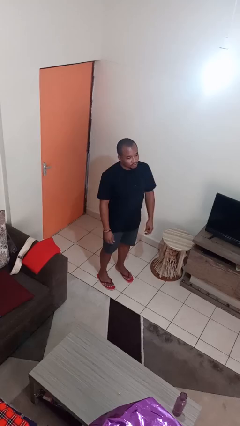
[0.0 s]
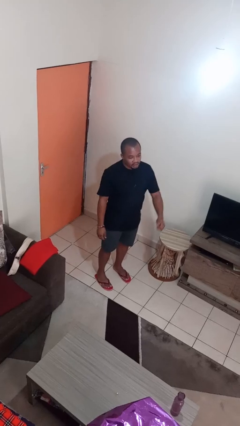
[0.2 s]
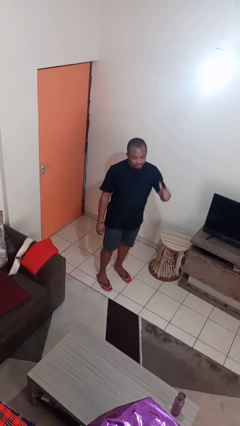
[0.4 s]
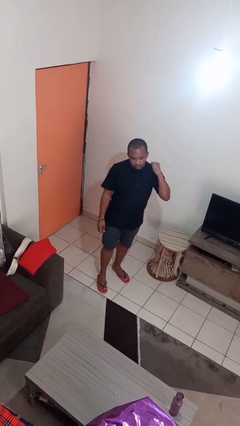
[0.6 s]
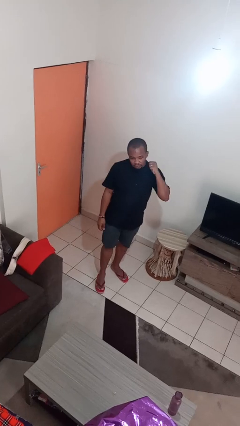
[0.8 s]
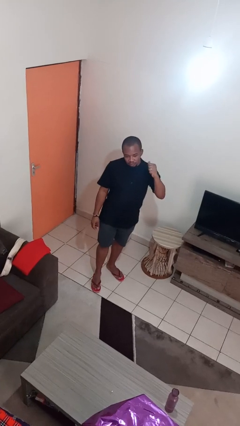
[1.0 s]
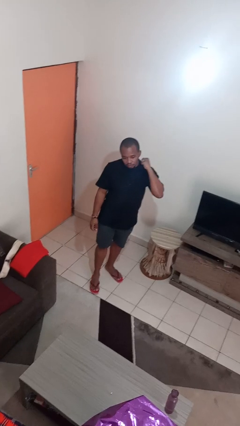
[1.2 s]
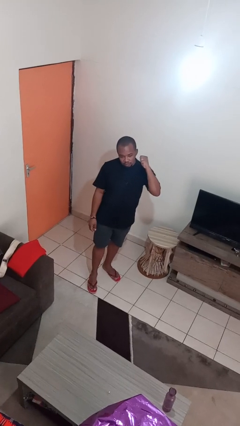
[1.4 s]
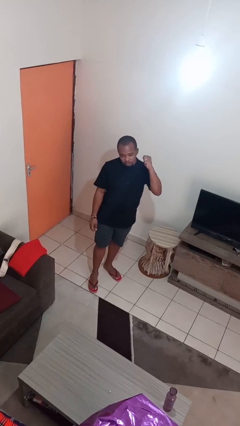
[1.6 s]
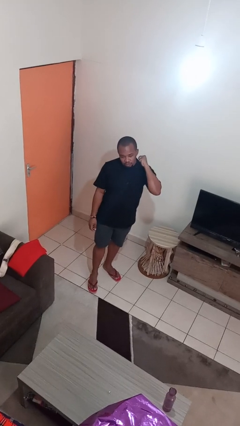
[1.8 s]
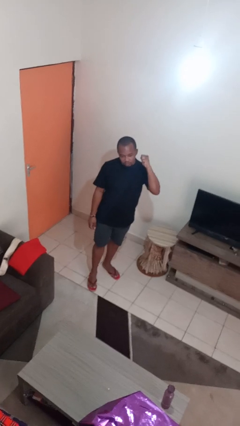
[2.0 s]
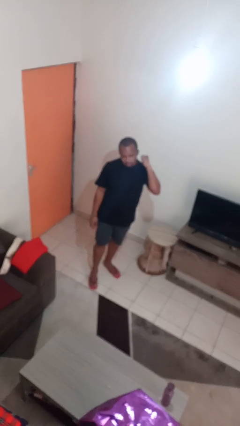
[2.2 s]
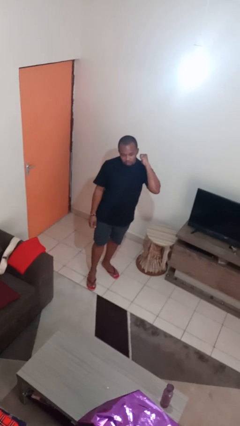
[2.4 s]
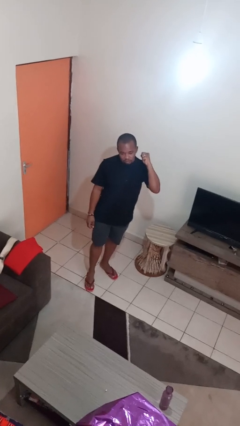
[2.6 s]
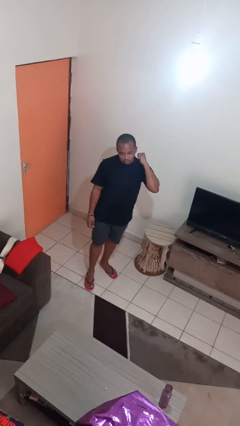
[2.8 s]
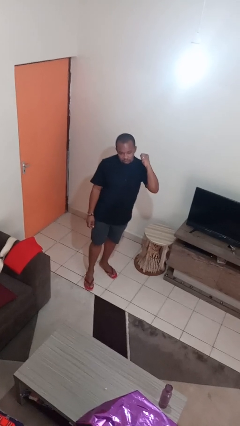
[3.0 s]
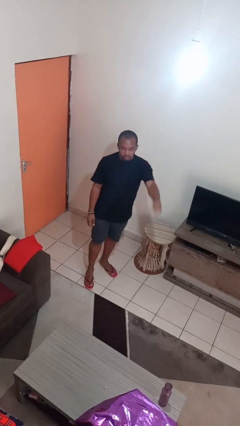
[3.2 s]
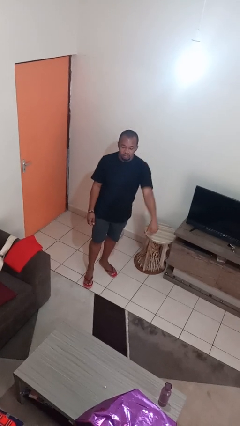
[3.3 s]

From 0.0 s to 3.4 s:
person gestures behind me

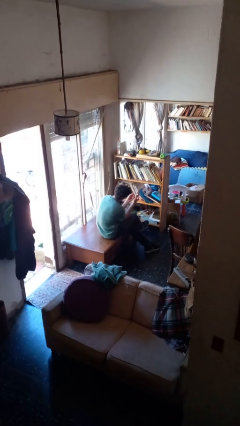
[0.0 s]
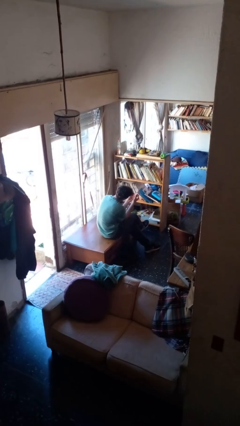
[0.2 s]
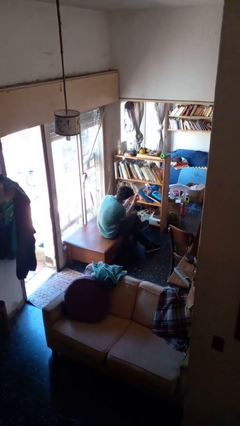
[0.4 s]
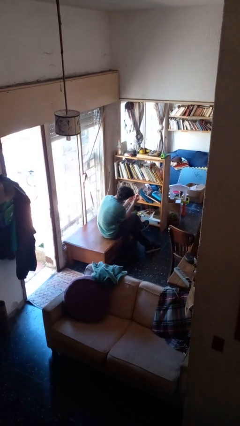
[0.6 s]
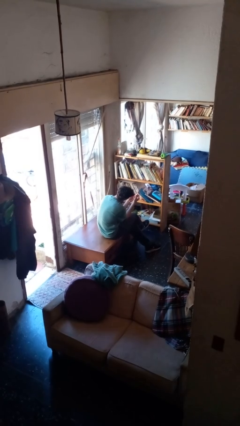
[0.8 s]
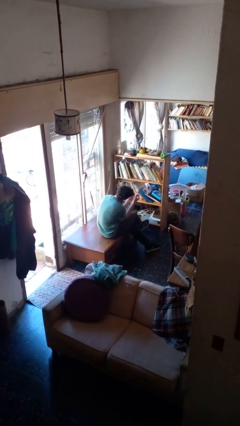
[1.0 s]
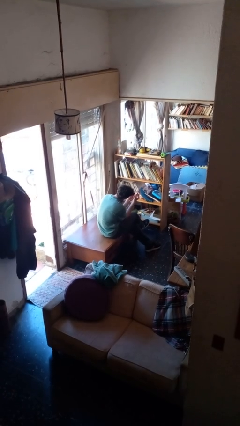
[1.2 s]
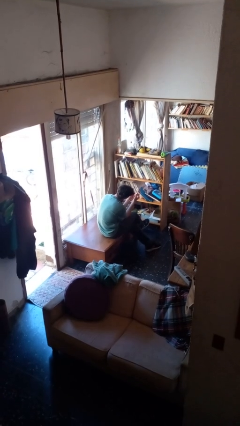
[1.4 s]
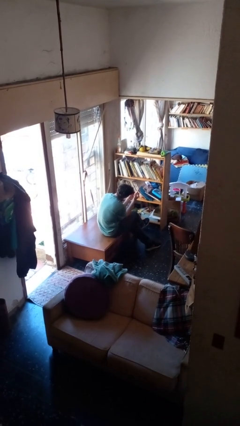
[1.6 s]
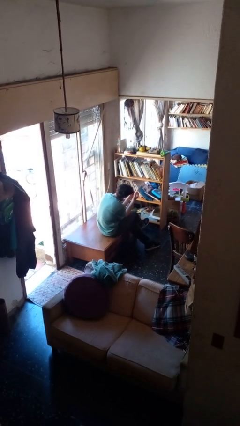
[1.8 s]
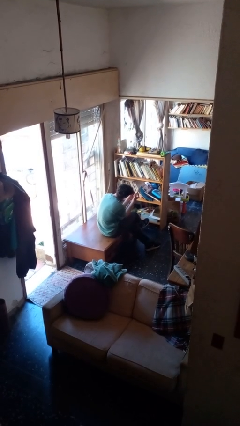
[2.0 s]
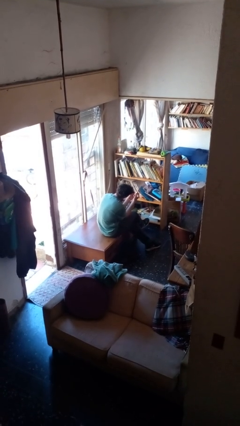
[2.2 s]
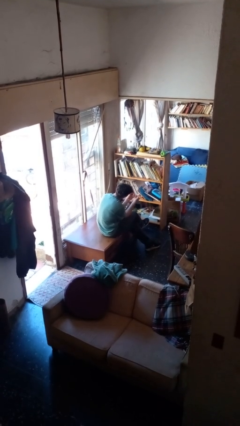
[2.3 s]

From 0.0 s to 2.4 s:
person paints fingernails

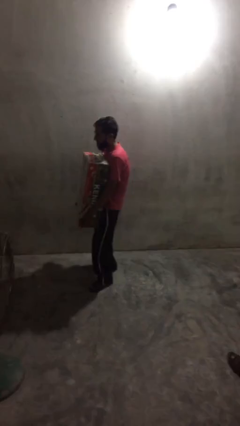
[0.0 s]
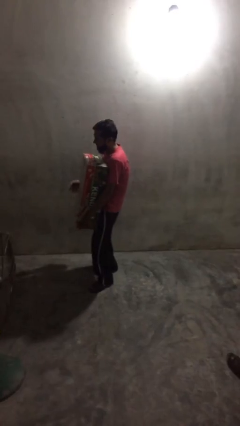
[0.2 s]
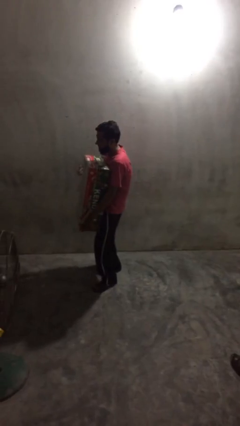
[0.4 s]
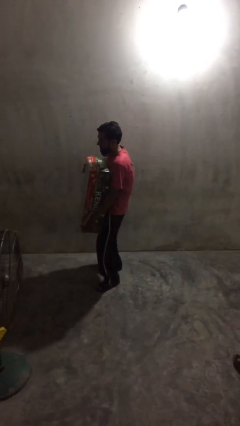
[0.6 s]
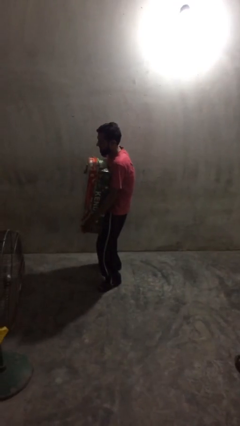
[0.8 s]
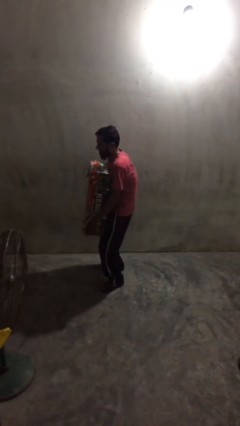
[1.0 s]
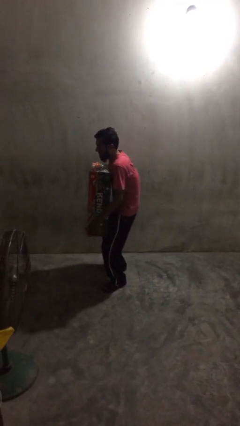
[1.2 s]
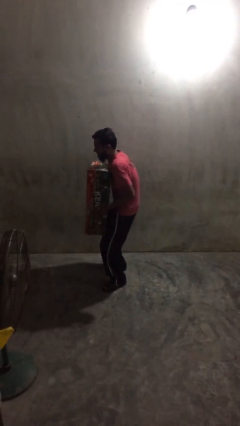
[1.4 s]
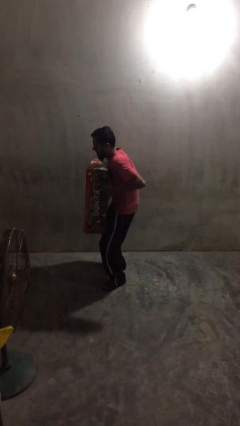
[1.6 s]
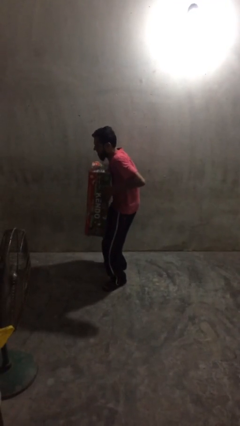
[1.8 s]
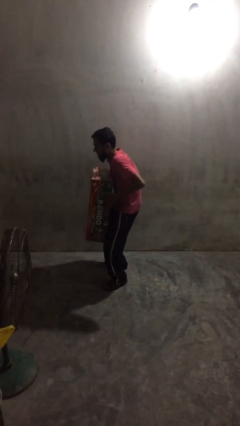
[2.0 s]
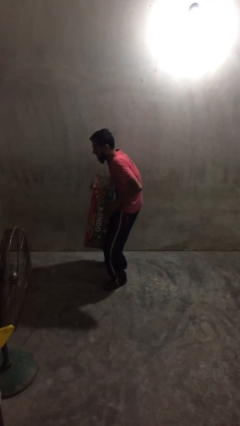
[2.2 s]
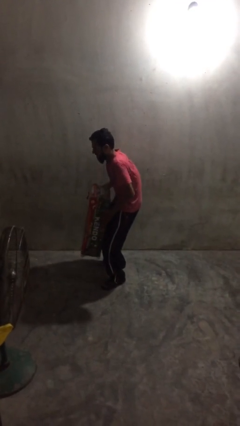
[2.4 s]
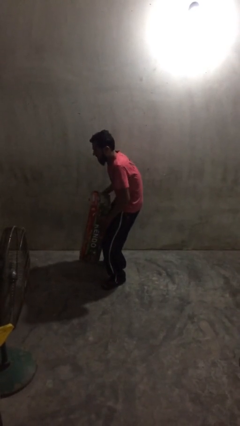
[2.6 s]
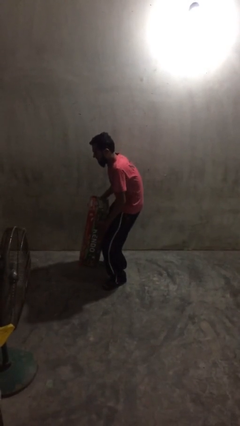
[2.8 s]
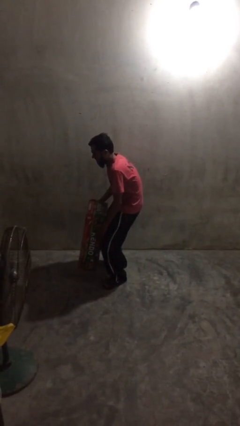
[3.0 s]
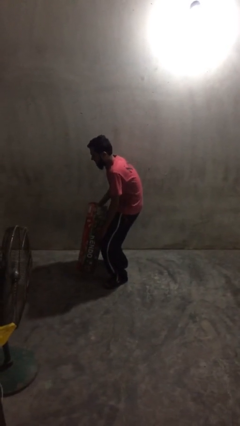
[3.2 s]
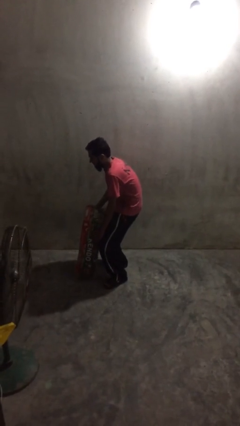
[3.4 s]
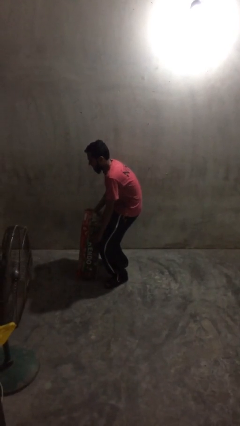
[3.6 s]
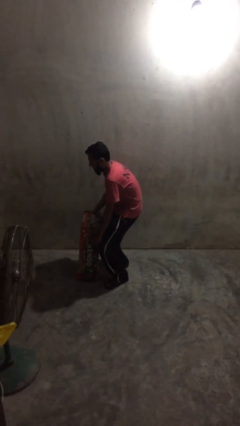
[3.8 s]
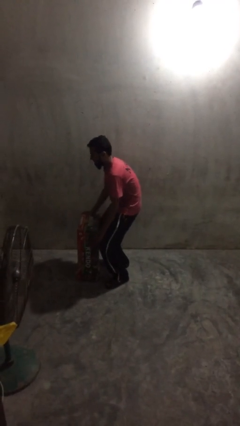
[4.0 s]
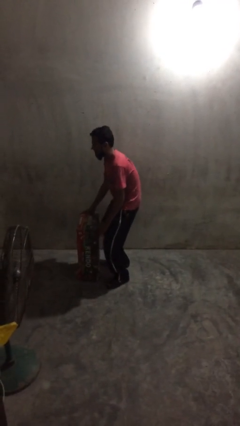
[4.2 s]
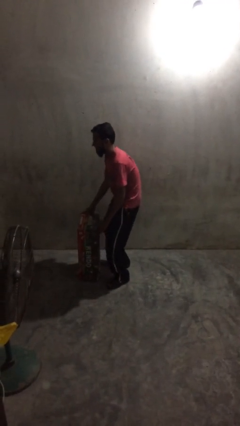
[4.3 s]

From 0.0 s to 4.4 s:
person puts down object on floor

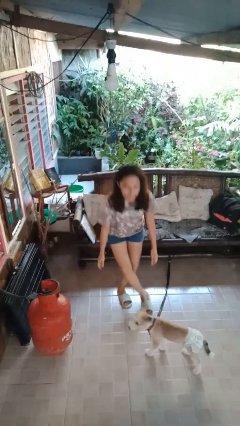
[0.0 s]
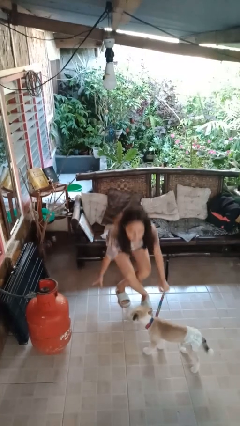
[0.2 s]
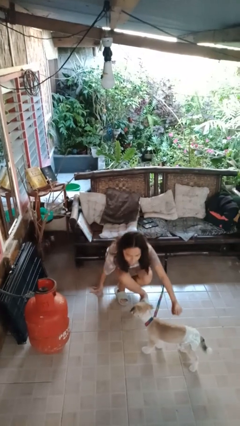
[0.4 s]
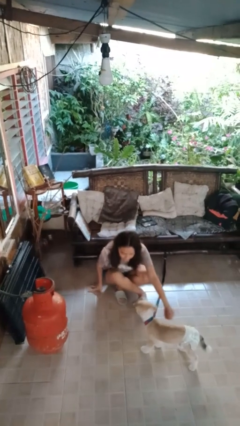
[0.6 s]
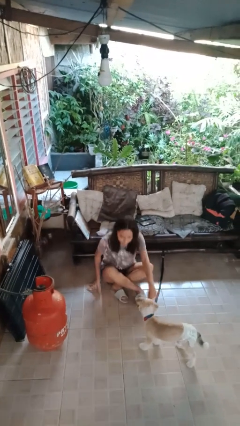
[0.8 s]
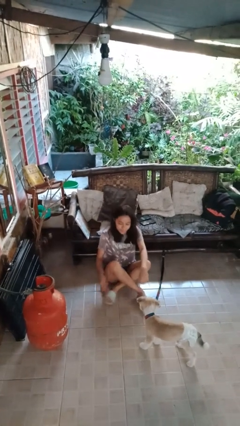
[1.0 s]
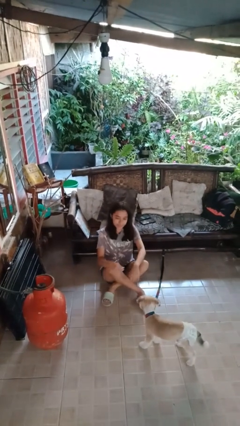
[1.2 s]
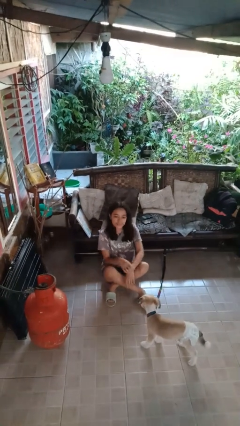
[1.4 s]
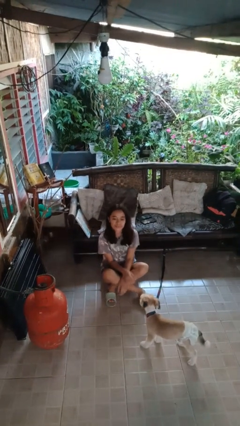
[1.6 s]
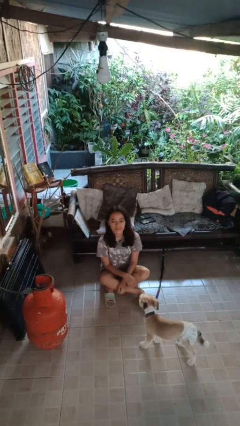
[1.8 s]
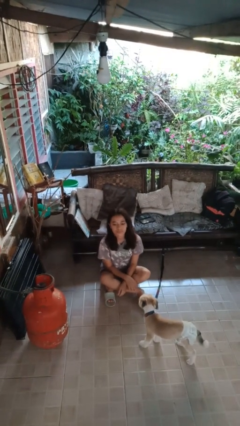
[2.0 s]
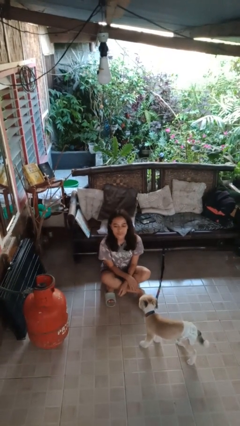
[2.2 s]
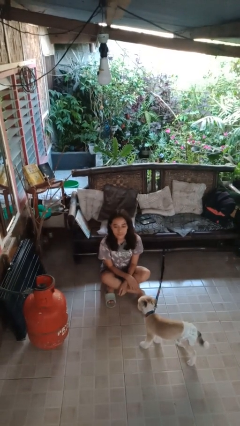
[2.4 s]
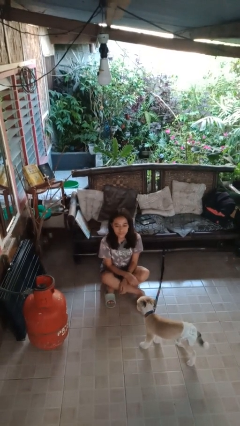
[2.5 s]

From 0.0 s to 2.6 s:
person sits crisscross

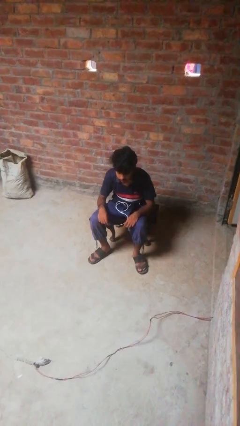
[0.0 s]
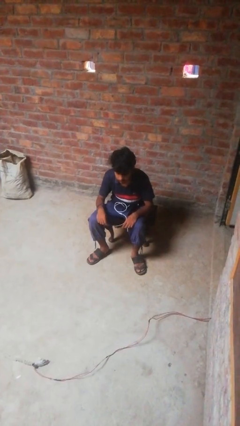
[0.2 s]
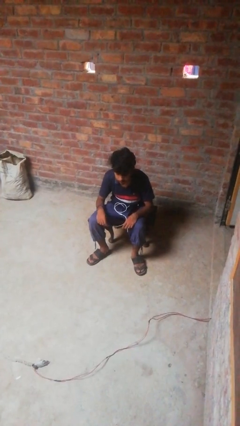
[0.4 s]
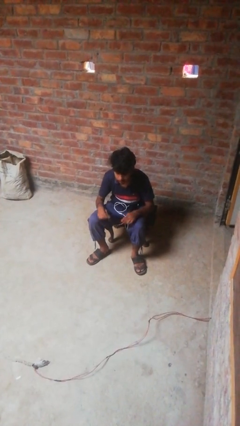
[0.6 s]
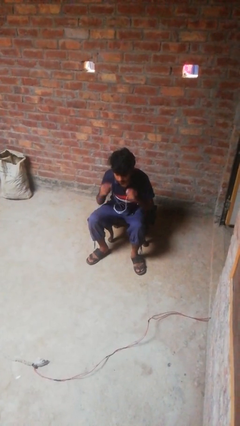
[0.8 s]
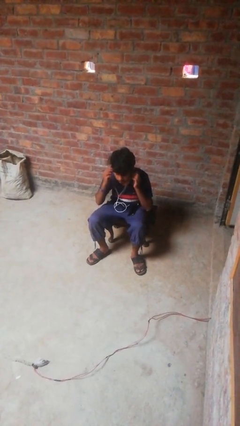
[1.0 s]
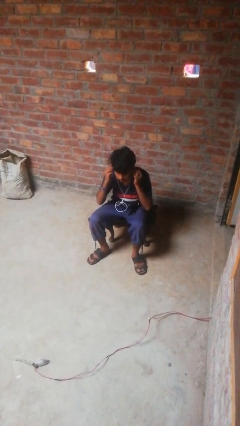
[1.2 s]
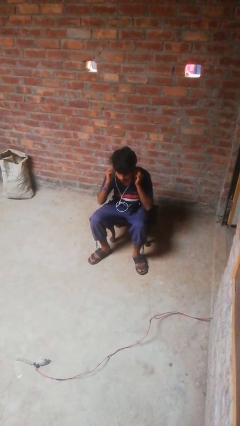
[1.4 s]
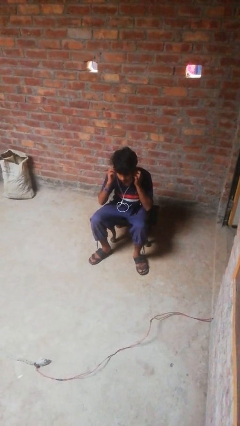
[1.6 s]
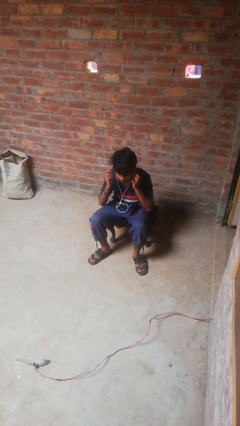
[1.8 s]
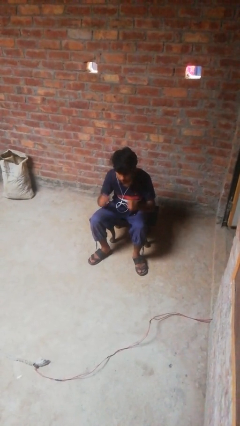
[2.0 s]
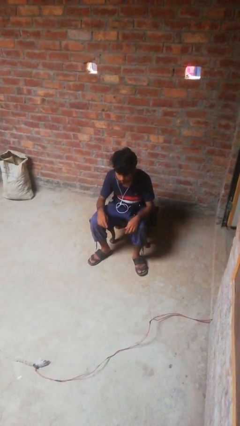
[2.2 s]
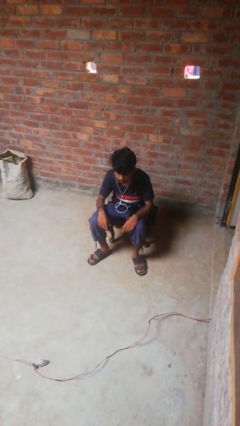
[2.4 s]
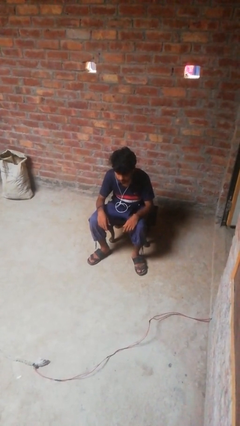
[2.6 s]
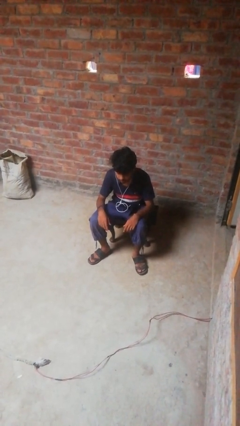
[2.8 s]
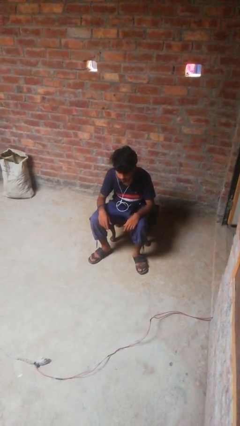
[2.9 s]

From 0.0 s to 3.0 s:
person puts on headphones

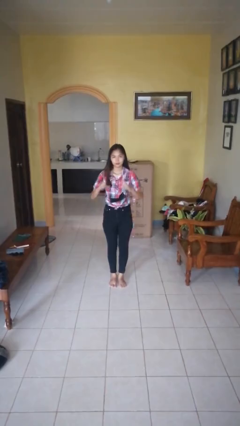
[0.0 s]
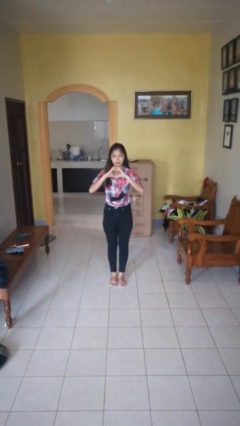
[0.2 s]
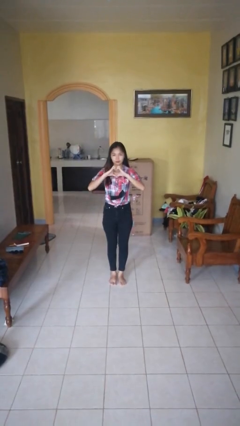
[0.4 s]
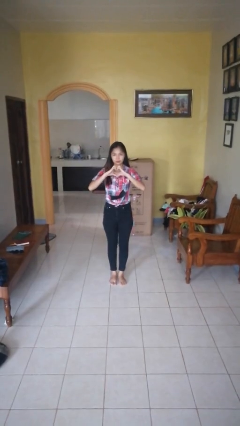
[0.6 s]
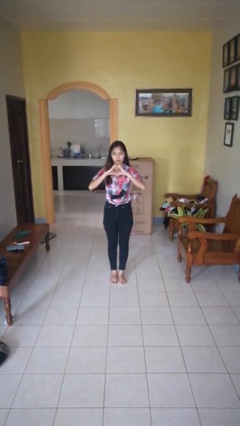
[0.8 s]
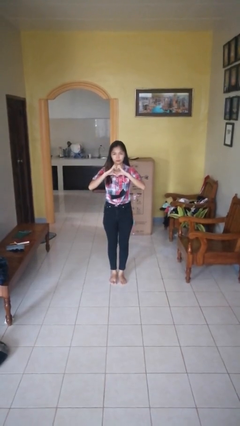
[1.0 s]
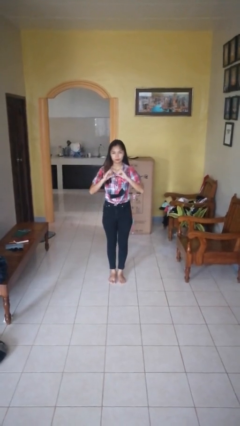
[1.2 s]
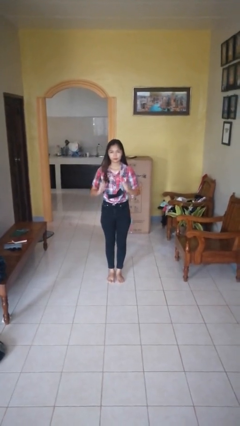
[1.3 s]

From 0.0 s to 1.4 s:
person gestures heart

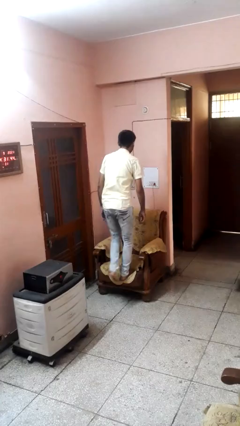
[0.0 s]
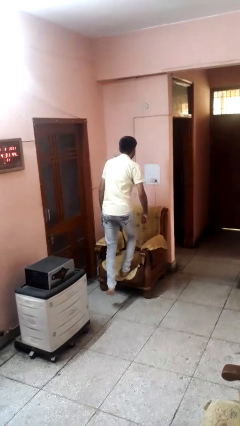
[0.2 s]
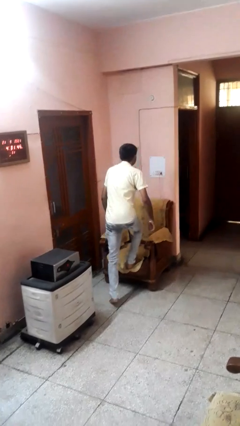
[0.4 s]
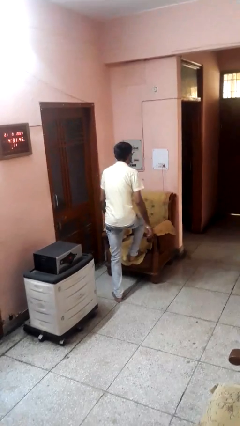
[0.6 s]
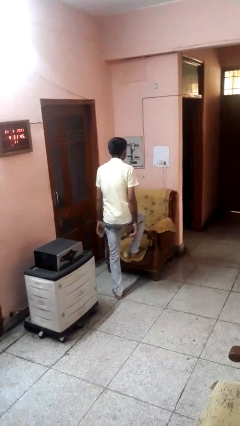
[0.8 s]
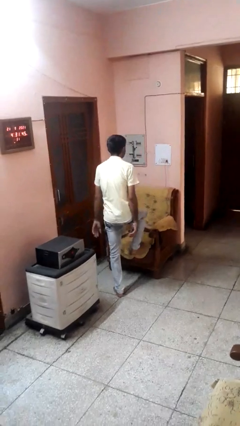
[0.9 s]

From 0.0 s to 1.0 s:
person climbs off couch
